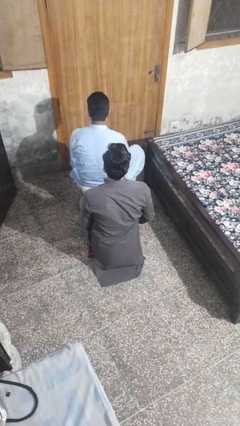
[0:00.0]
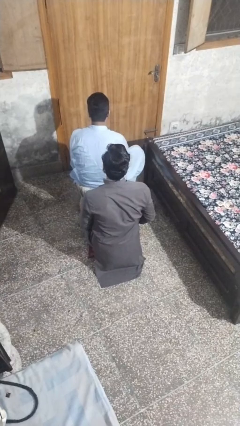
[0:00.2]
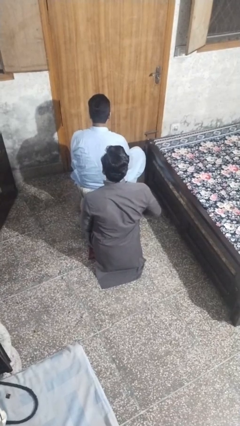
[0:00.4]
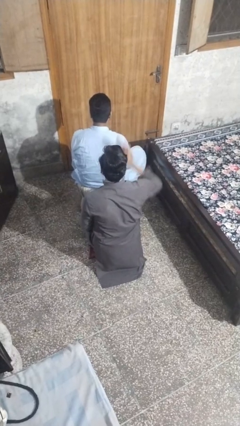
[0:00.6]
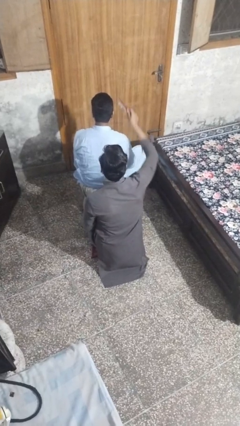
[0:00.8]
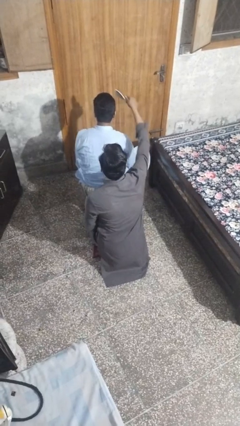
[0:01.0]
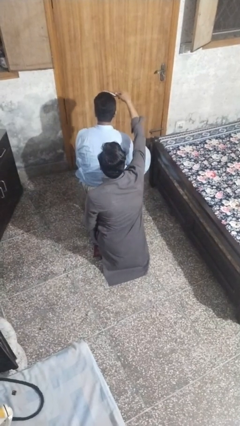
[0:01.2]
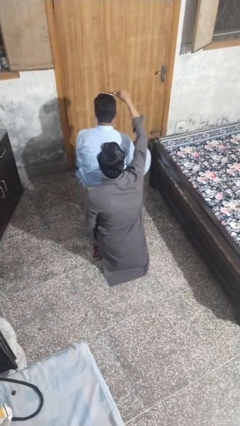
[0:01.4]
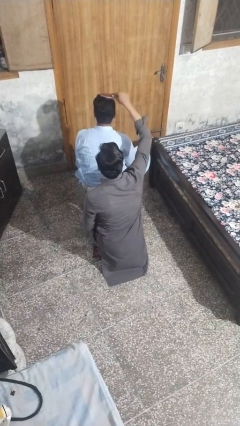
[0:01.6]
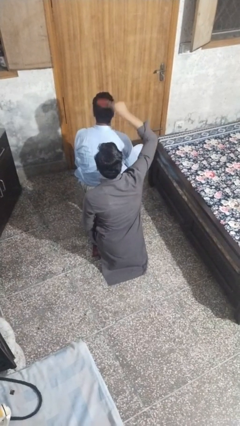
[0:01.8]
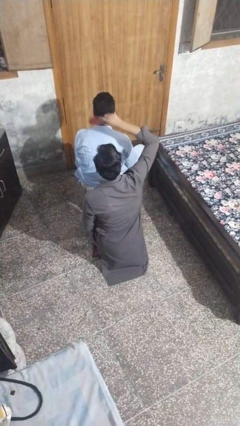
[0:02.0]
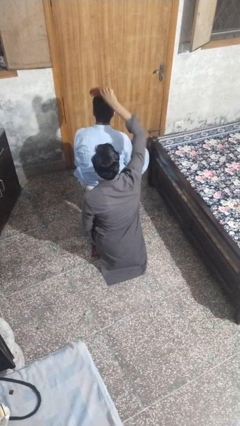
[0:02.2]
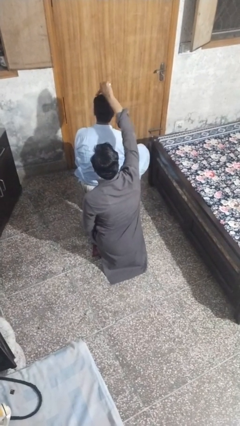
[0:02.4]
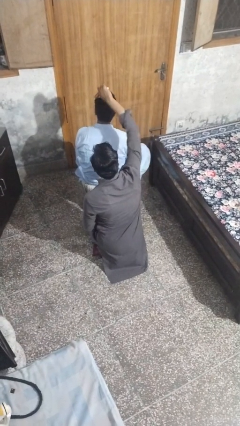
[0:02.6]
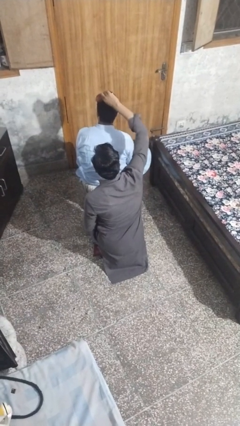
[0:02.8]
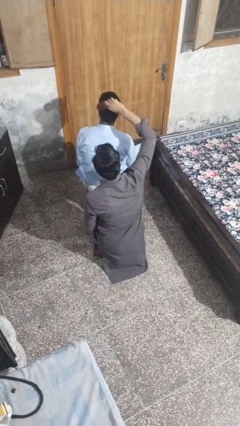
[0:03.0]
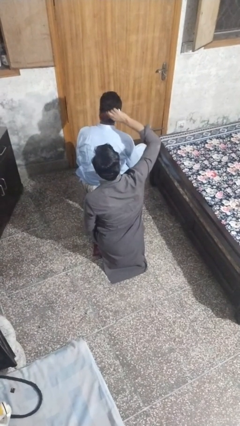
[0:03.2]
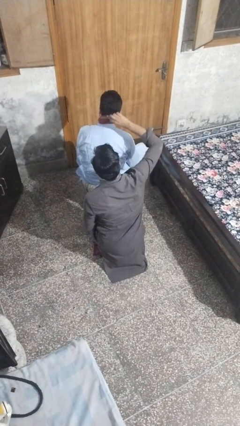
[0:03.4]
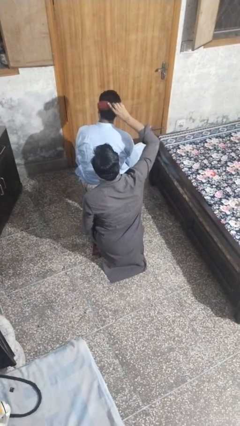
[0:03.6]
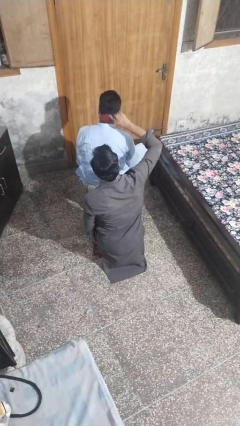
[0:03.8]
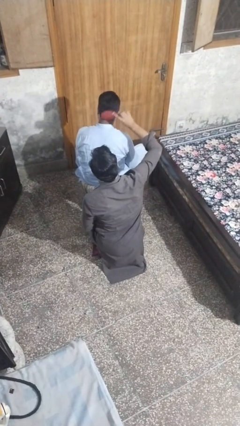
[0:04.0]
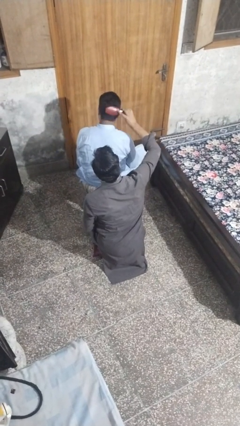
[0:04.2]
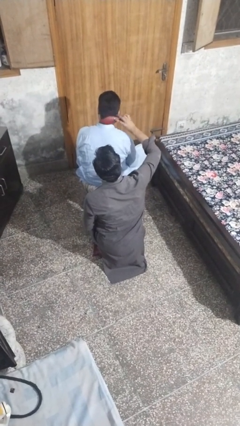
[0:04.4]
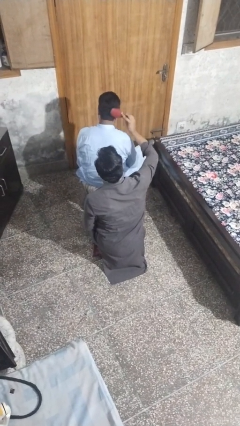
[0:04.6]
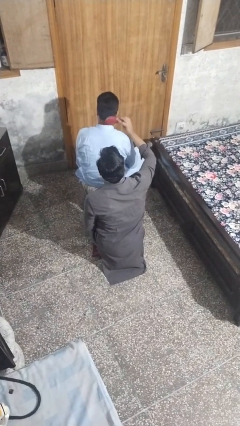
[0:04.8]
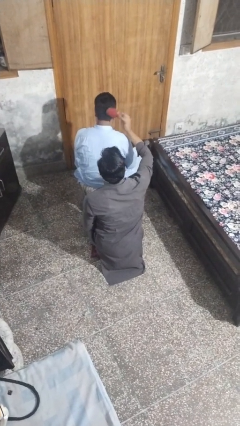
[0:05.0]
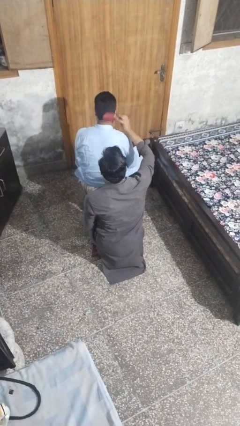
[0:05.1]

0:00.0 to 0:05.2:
person brushes hair of person

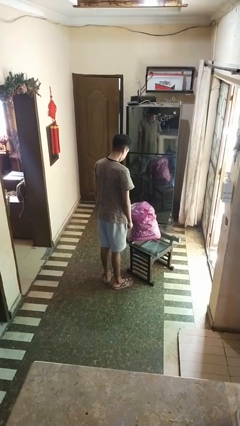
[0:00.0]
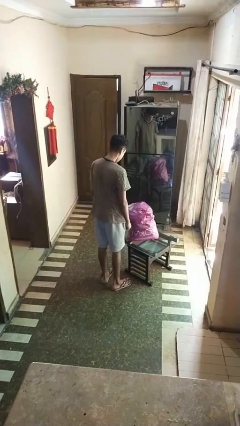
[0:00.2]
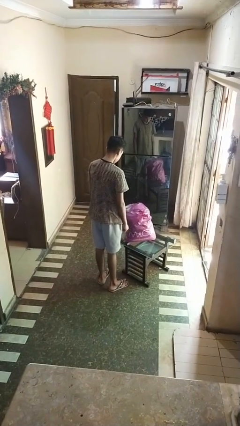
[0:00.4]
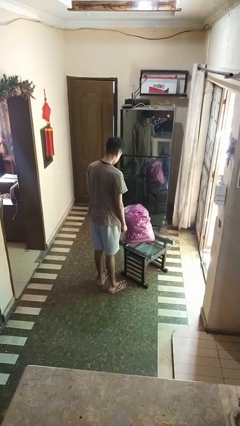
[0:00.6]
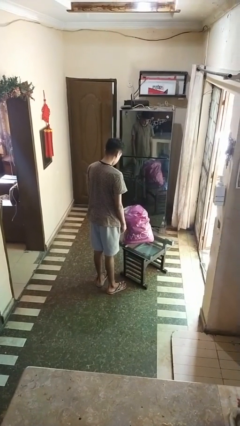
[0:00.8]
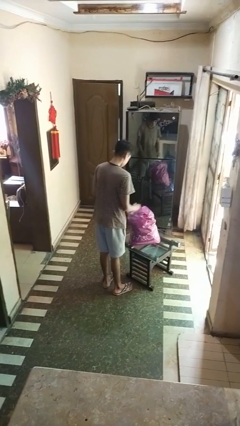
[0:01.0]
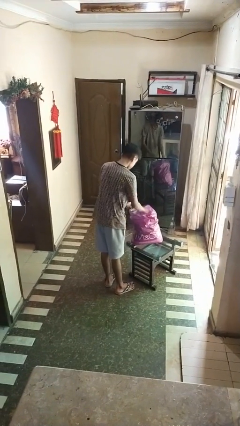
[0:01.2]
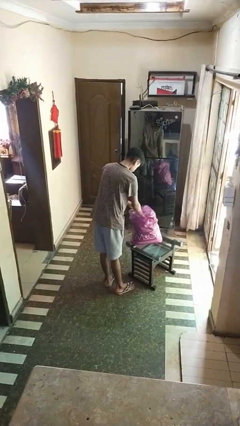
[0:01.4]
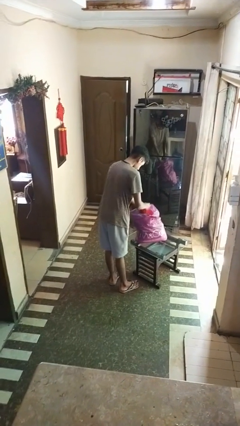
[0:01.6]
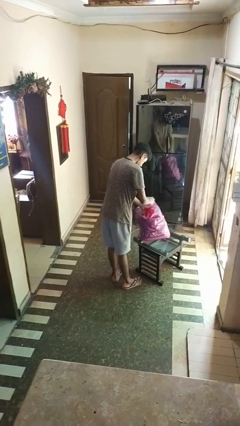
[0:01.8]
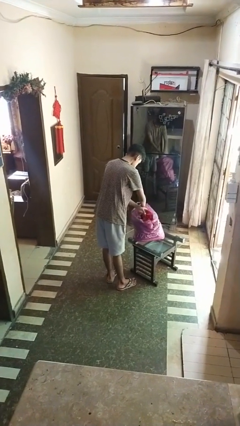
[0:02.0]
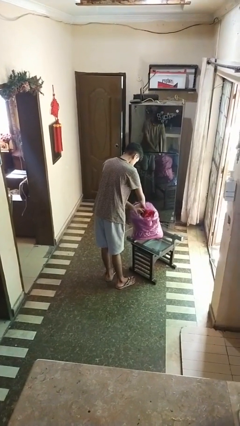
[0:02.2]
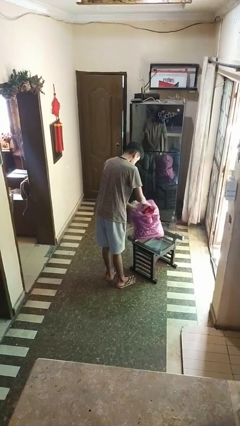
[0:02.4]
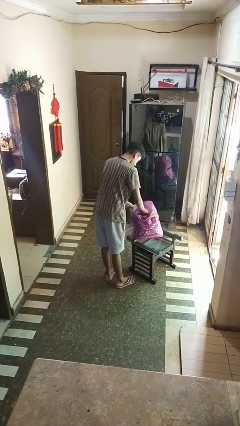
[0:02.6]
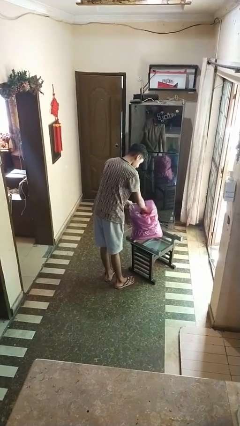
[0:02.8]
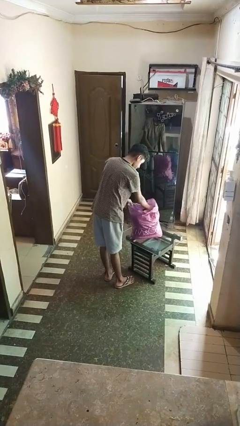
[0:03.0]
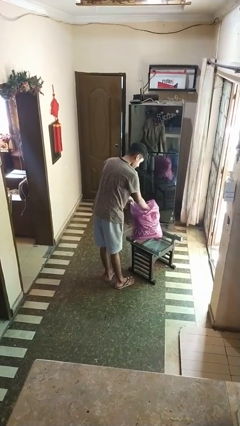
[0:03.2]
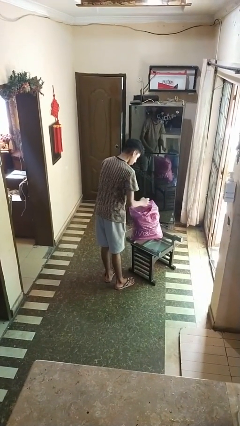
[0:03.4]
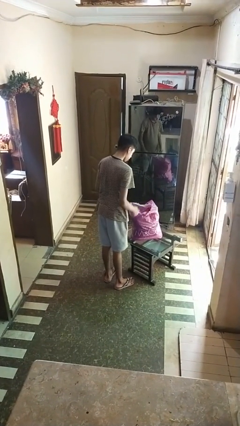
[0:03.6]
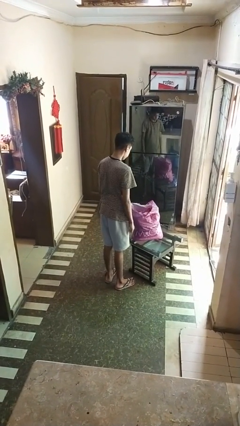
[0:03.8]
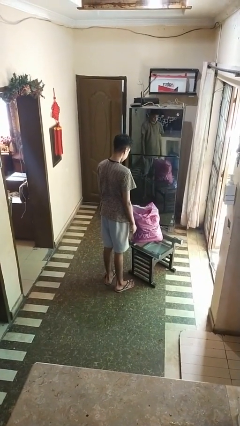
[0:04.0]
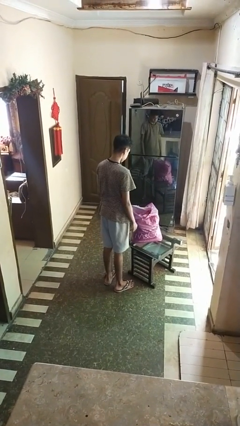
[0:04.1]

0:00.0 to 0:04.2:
person searches in bag

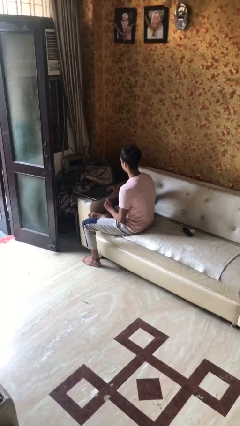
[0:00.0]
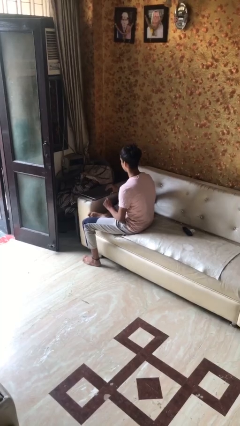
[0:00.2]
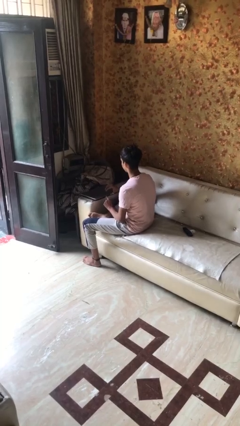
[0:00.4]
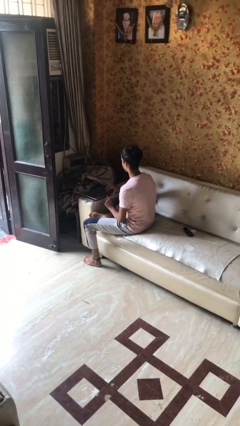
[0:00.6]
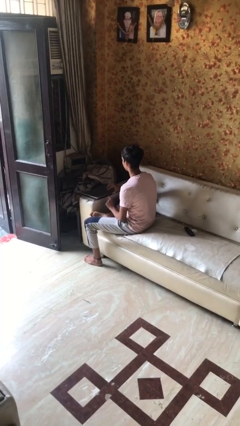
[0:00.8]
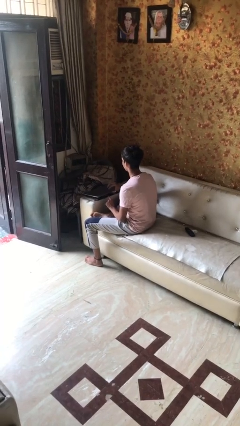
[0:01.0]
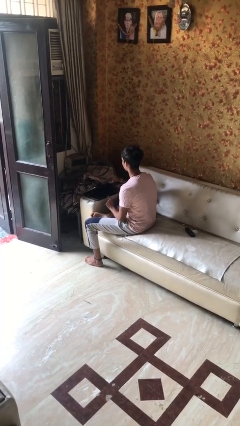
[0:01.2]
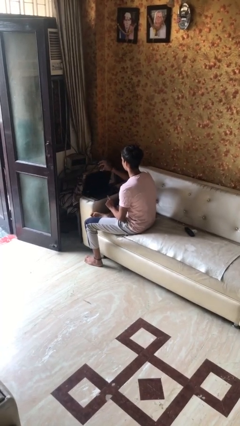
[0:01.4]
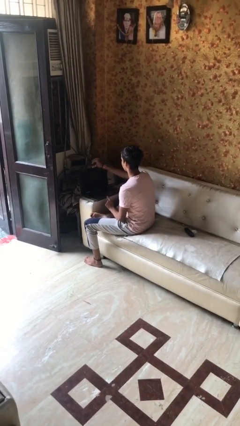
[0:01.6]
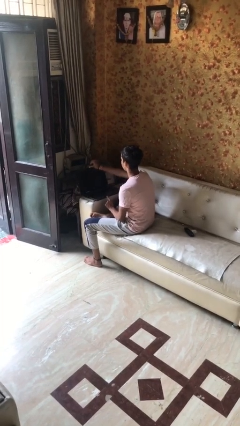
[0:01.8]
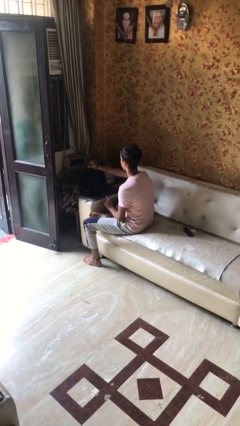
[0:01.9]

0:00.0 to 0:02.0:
person opens laptop

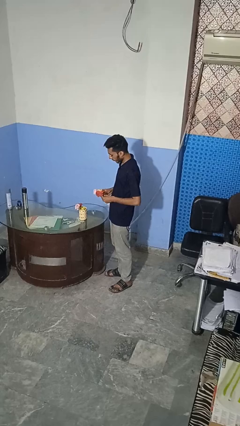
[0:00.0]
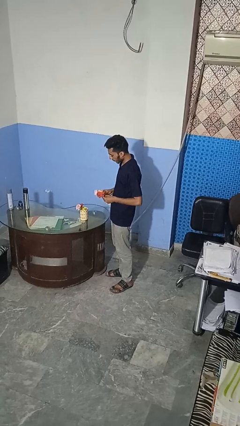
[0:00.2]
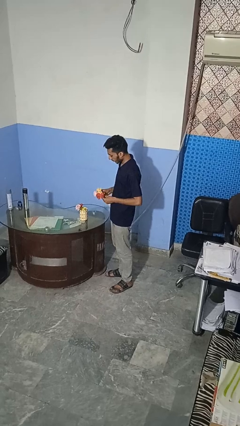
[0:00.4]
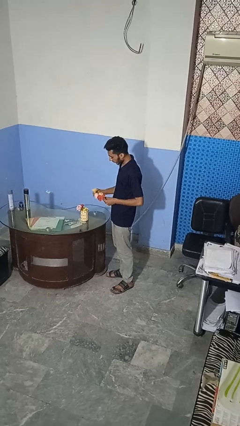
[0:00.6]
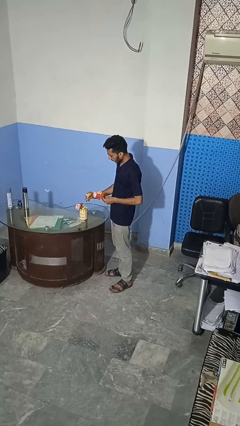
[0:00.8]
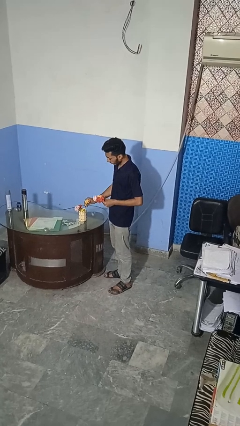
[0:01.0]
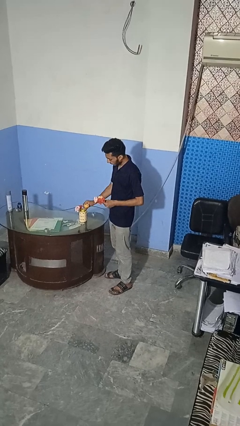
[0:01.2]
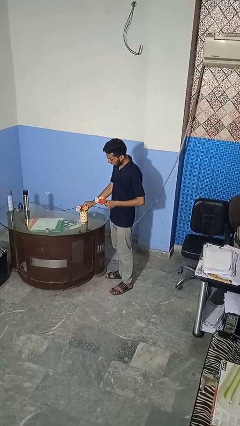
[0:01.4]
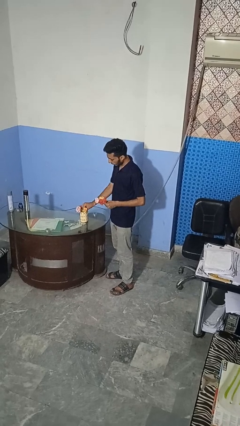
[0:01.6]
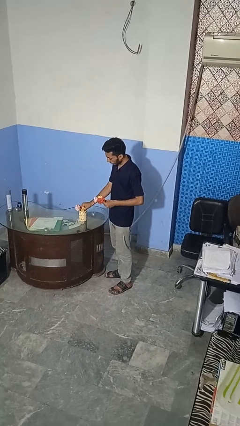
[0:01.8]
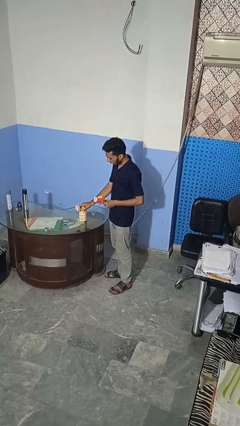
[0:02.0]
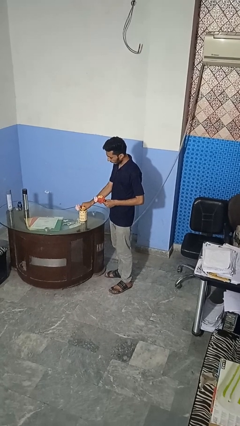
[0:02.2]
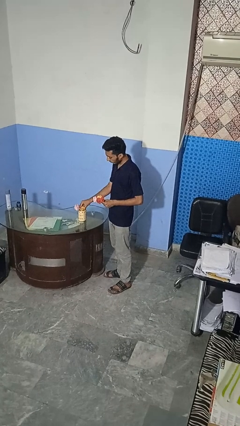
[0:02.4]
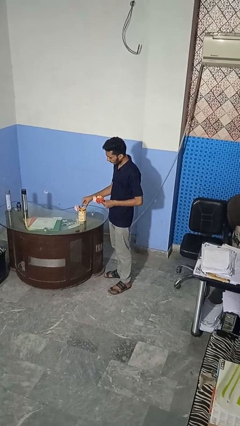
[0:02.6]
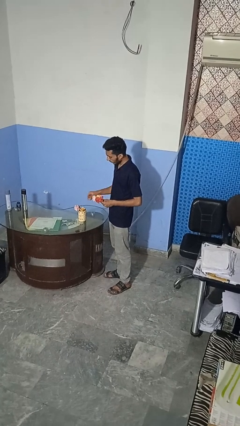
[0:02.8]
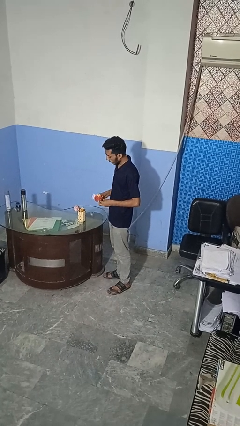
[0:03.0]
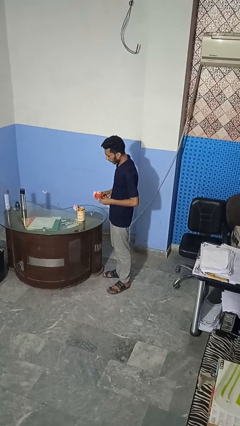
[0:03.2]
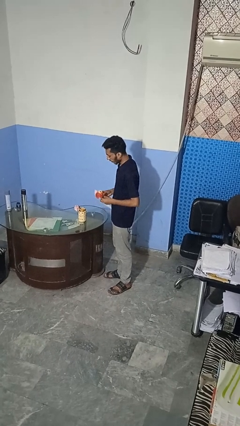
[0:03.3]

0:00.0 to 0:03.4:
person arranges flowers in vase

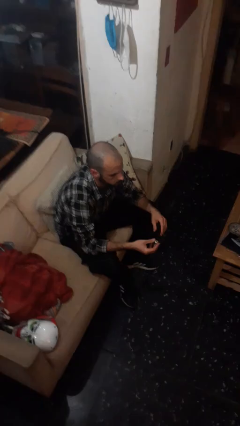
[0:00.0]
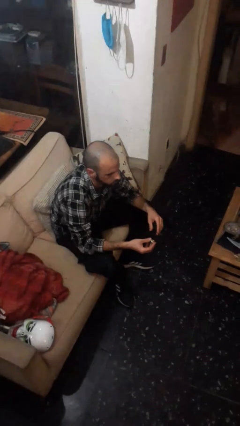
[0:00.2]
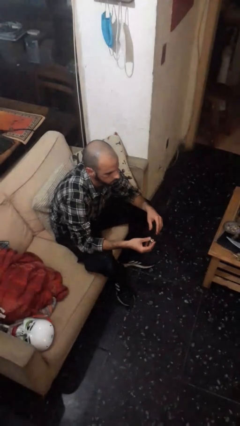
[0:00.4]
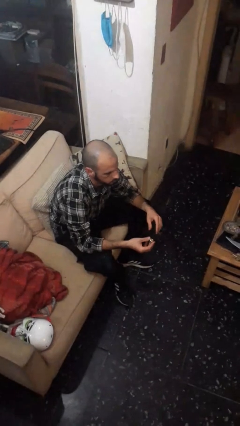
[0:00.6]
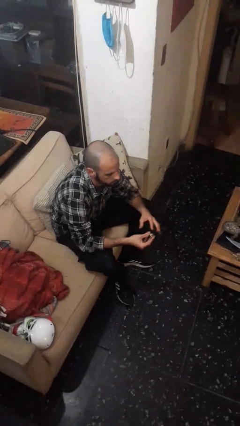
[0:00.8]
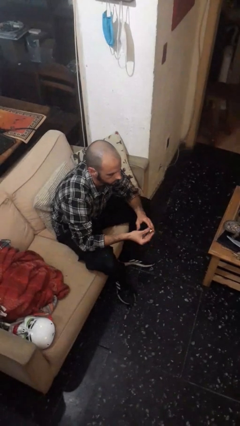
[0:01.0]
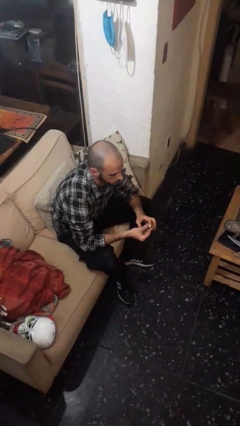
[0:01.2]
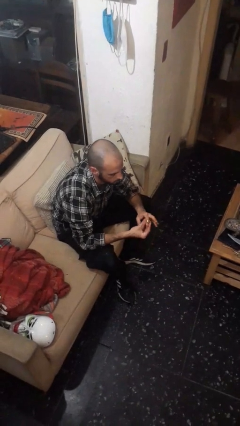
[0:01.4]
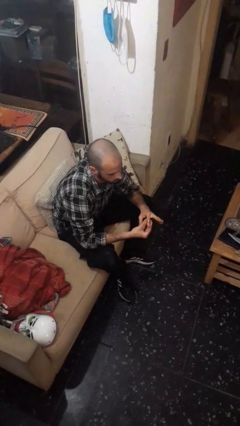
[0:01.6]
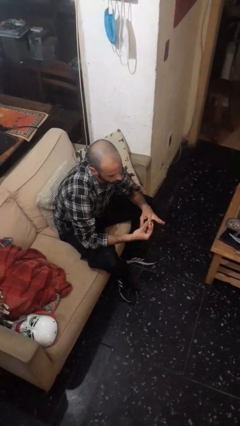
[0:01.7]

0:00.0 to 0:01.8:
person puts on ring

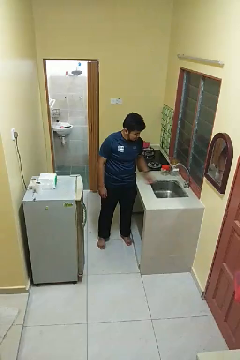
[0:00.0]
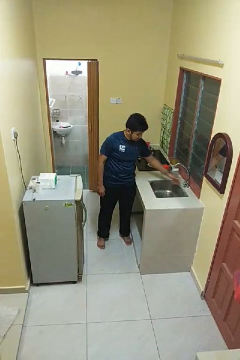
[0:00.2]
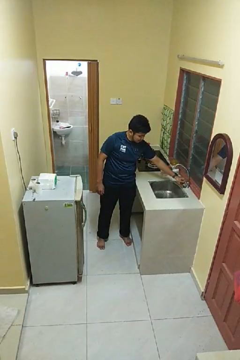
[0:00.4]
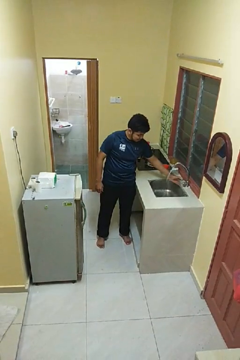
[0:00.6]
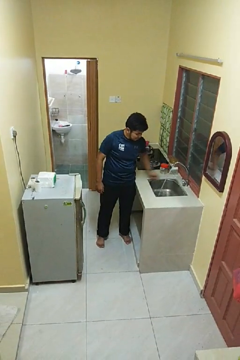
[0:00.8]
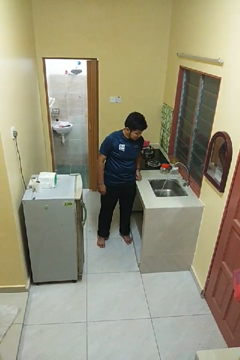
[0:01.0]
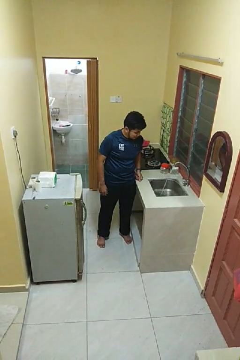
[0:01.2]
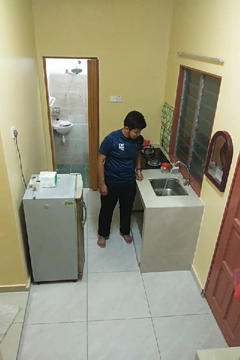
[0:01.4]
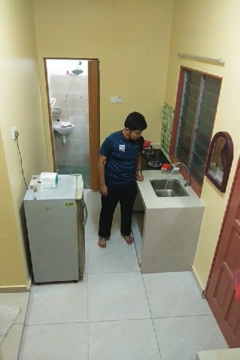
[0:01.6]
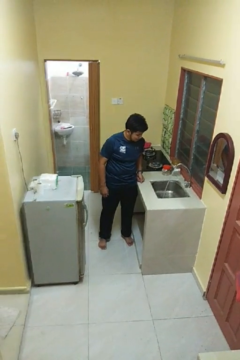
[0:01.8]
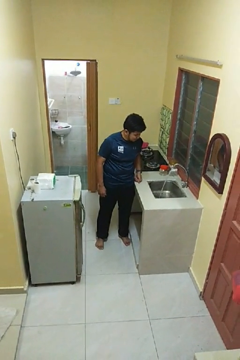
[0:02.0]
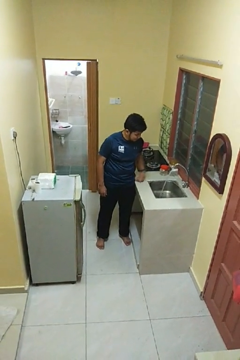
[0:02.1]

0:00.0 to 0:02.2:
person turns on faucet
